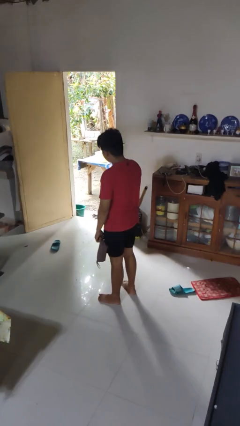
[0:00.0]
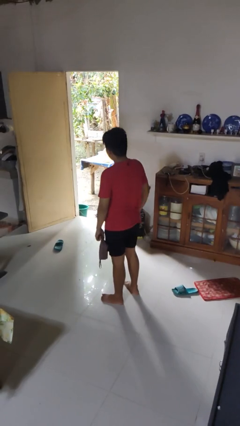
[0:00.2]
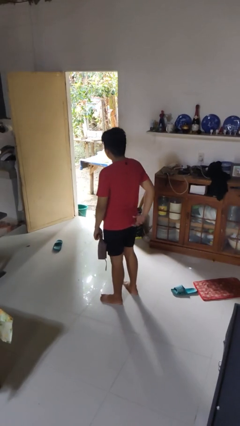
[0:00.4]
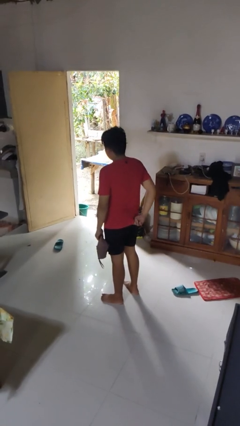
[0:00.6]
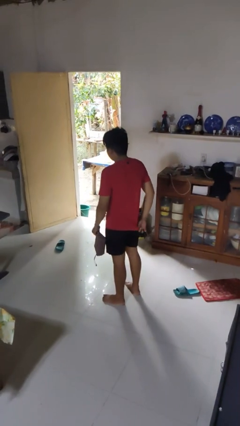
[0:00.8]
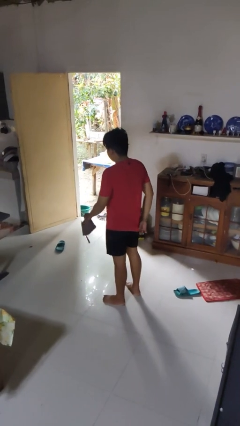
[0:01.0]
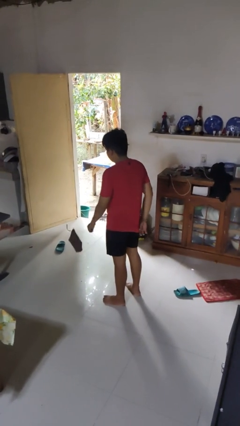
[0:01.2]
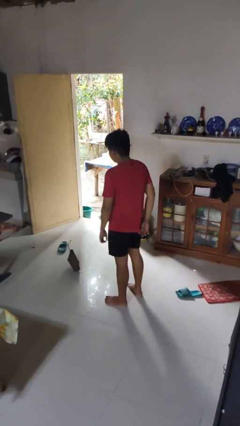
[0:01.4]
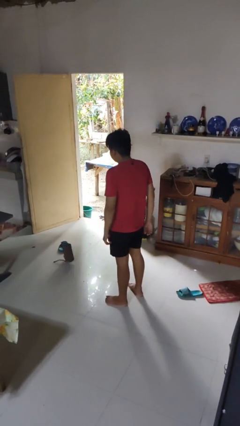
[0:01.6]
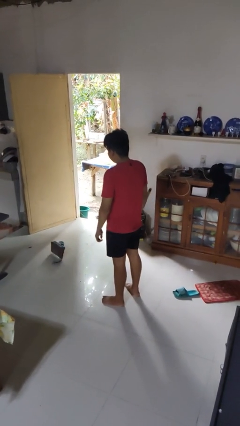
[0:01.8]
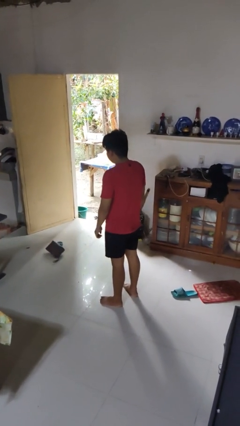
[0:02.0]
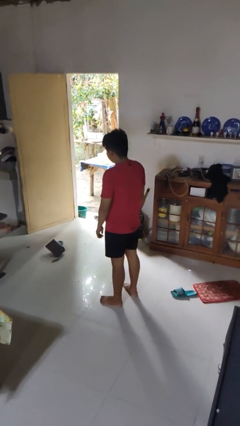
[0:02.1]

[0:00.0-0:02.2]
person throws object to ground

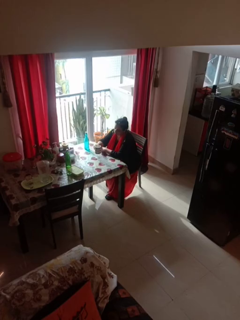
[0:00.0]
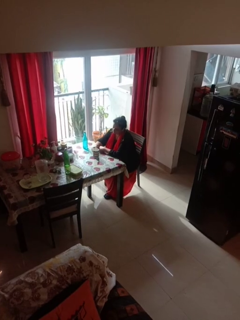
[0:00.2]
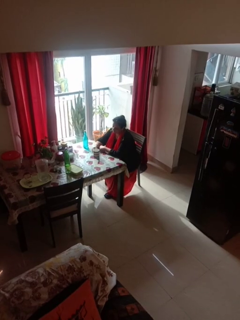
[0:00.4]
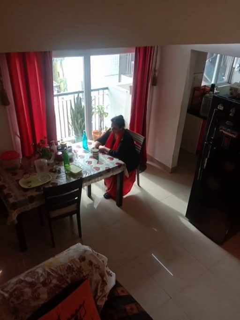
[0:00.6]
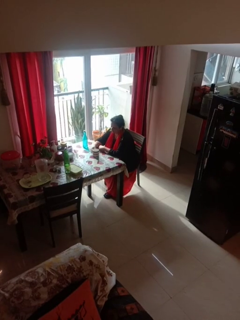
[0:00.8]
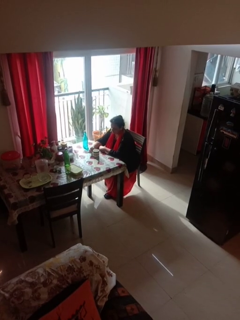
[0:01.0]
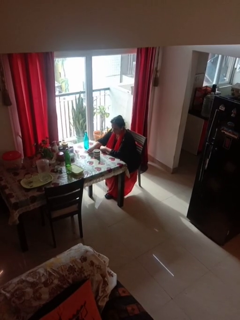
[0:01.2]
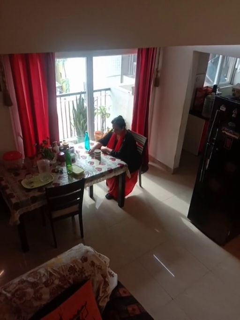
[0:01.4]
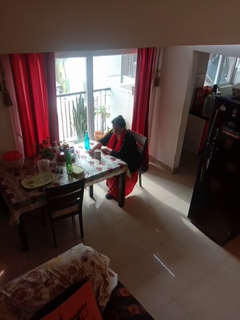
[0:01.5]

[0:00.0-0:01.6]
person puts down object on table

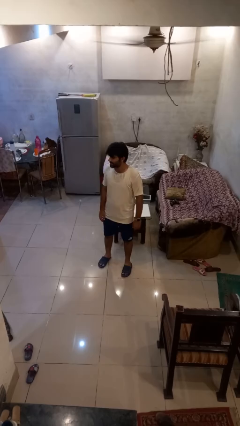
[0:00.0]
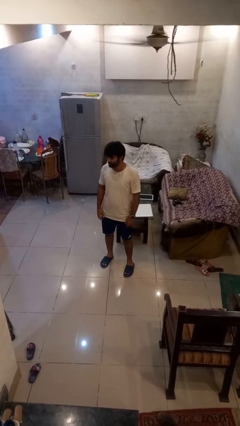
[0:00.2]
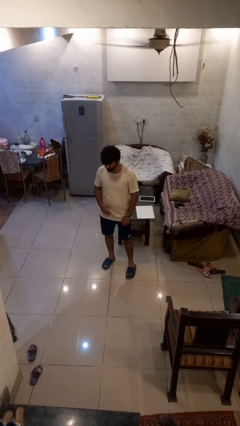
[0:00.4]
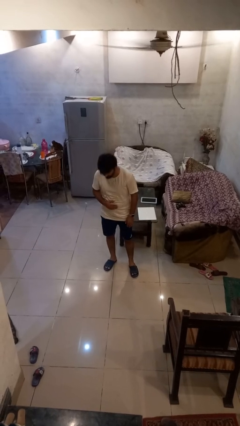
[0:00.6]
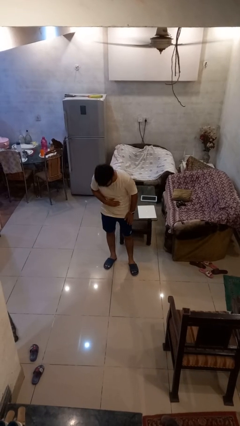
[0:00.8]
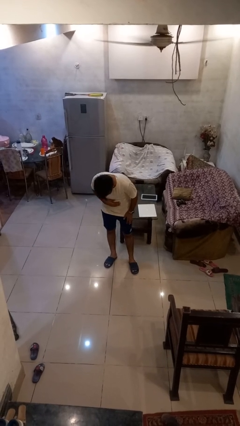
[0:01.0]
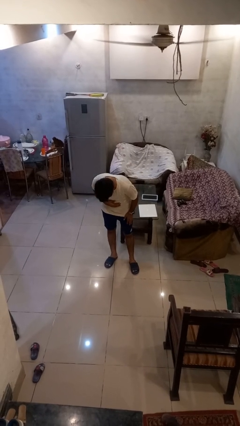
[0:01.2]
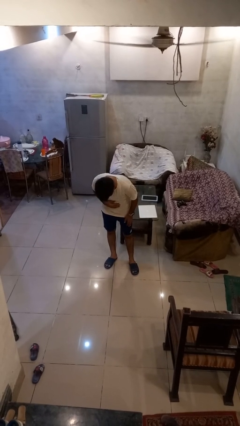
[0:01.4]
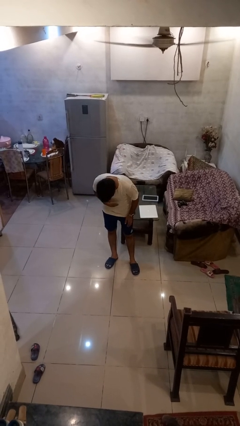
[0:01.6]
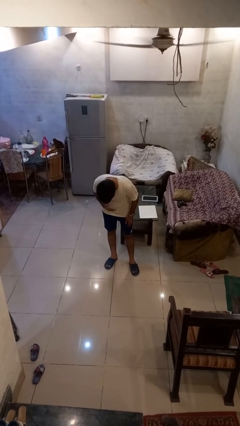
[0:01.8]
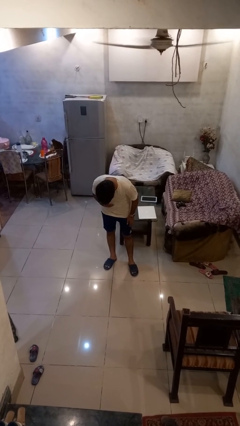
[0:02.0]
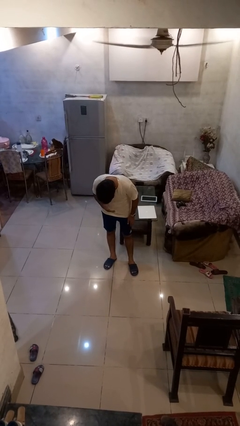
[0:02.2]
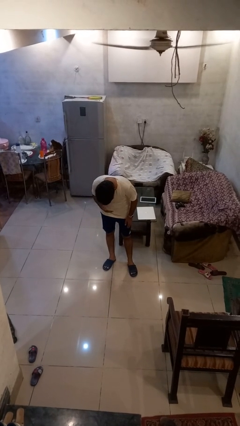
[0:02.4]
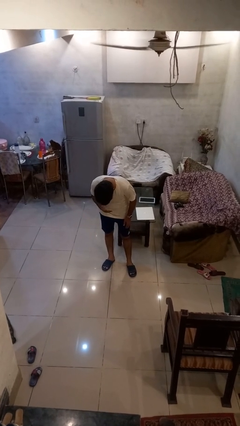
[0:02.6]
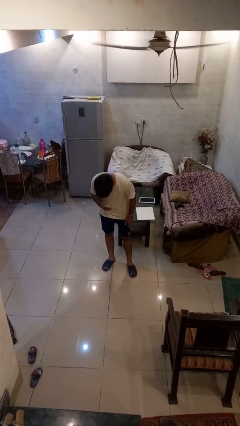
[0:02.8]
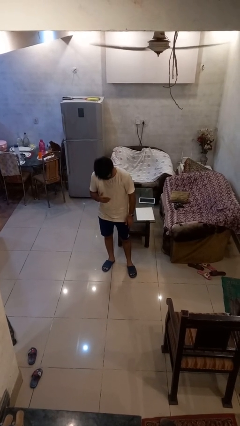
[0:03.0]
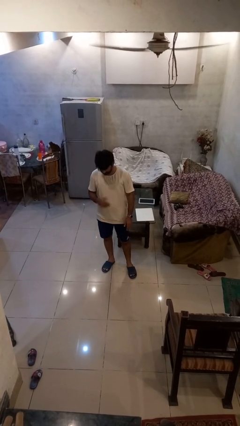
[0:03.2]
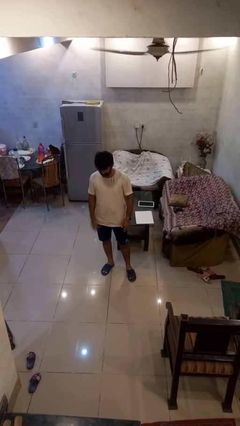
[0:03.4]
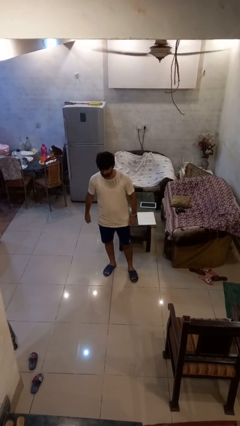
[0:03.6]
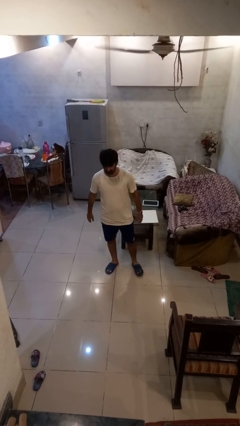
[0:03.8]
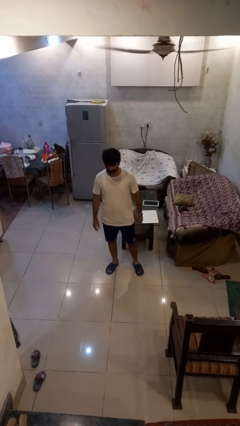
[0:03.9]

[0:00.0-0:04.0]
person bows

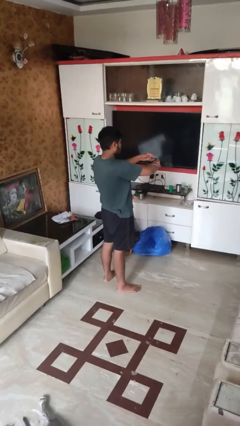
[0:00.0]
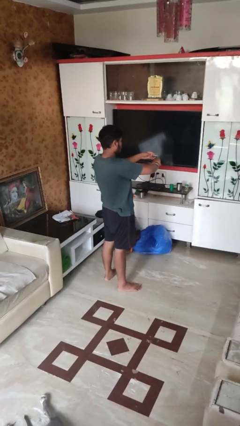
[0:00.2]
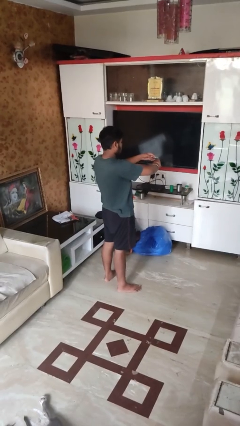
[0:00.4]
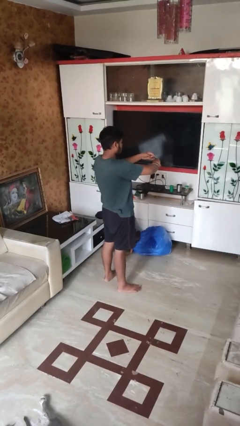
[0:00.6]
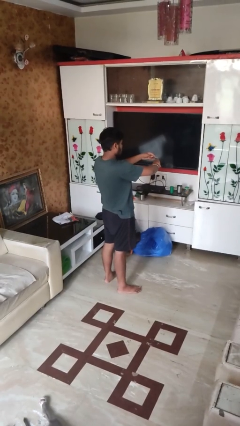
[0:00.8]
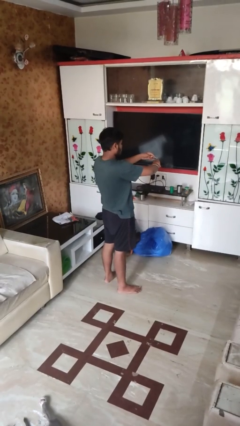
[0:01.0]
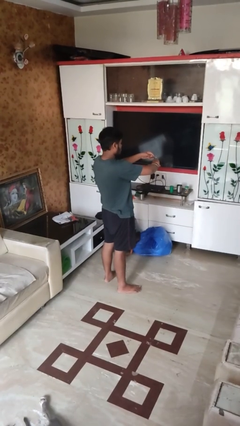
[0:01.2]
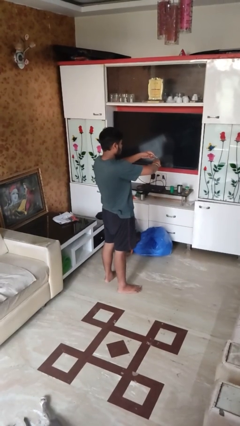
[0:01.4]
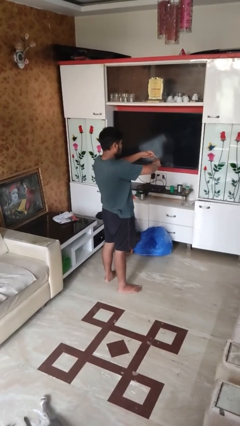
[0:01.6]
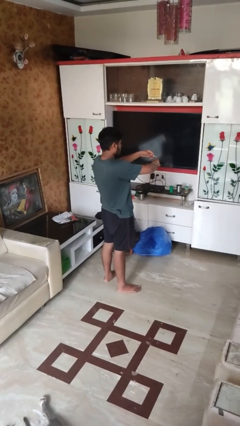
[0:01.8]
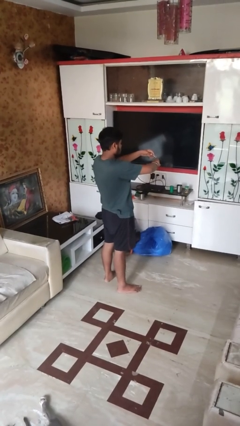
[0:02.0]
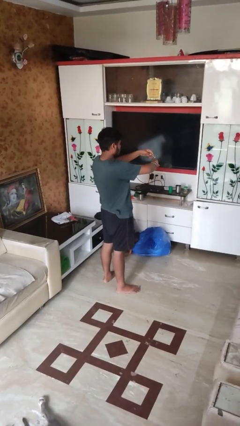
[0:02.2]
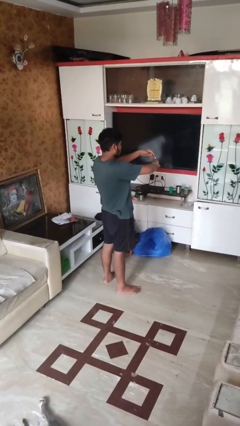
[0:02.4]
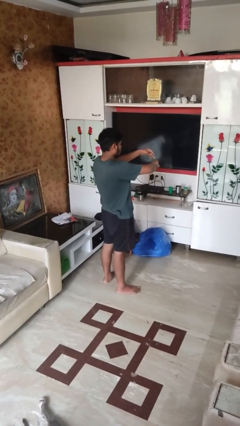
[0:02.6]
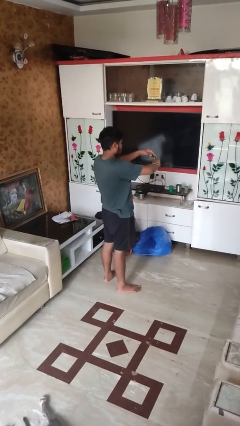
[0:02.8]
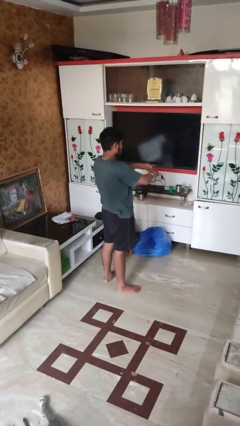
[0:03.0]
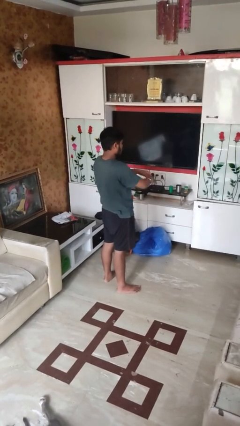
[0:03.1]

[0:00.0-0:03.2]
person clips fingernails

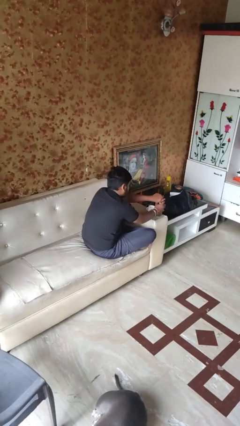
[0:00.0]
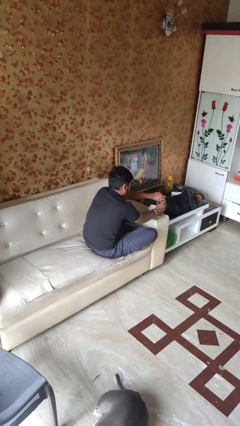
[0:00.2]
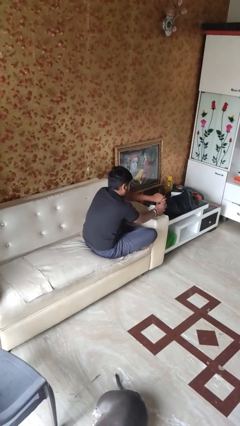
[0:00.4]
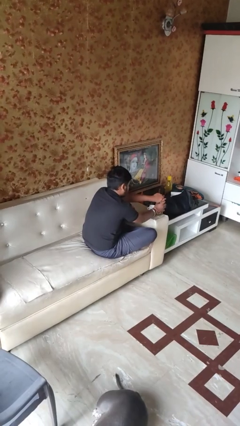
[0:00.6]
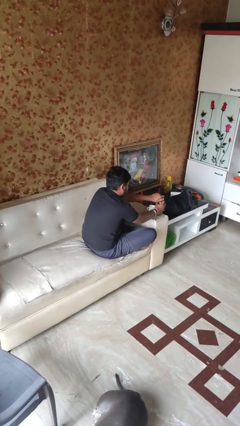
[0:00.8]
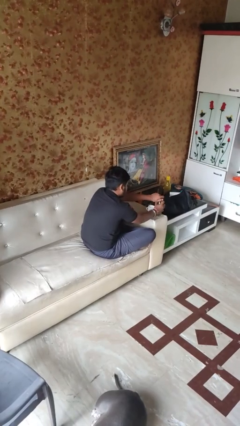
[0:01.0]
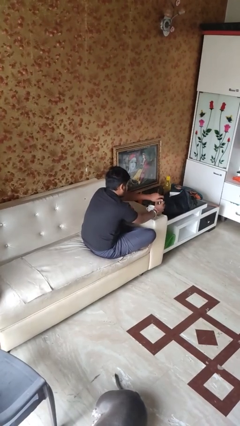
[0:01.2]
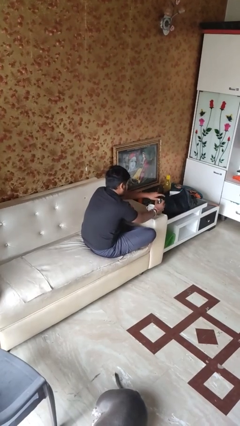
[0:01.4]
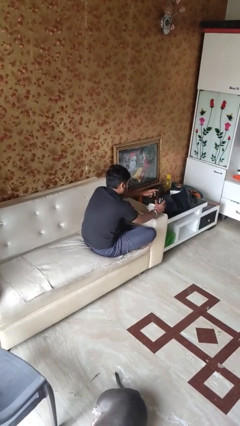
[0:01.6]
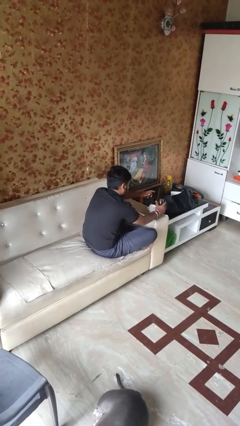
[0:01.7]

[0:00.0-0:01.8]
person screws lid to bottle

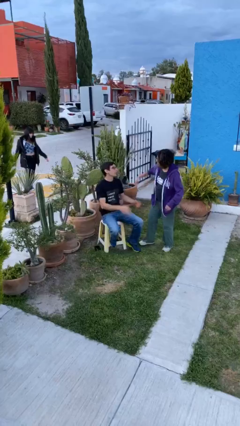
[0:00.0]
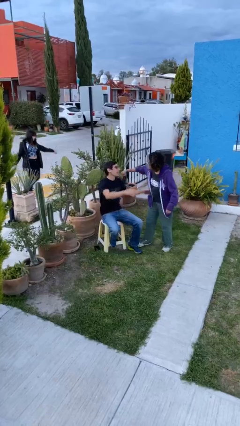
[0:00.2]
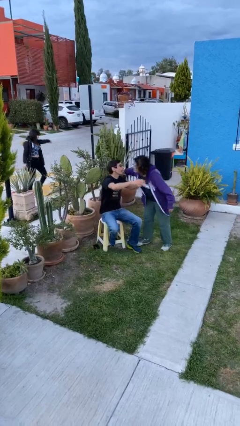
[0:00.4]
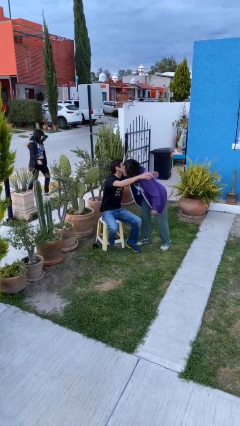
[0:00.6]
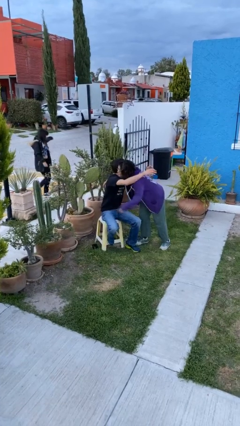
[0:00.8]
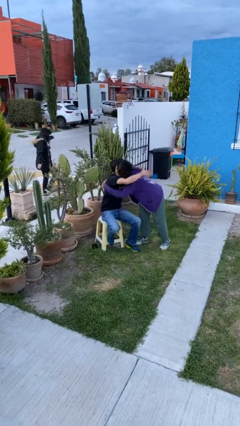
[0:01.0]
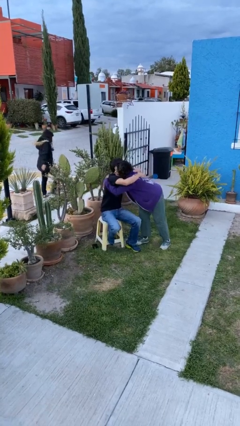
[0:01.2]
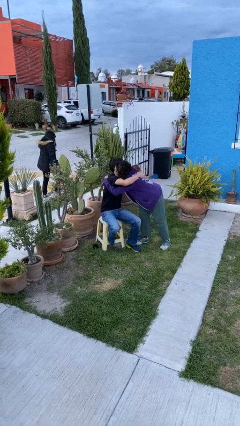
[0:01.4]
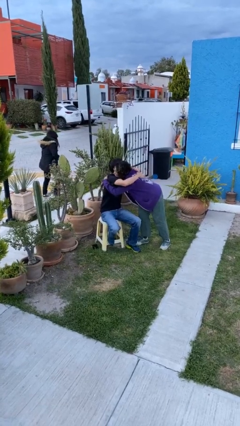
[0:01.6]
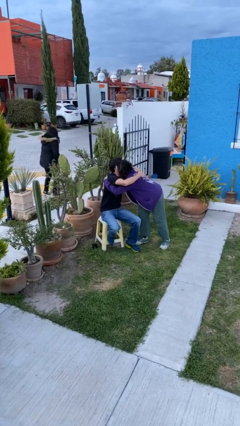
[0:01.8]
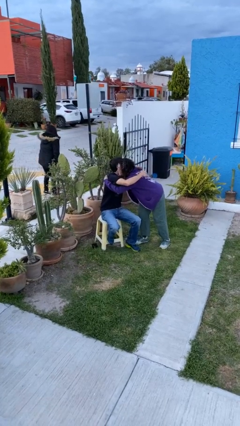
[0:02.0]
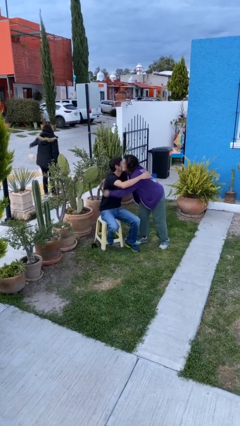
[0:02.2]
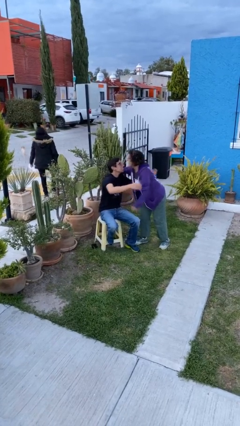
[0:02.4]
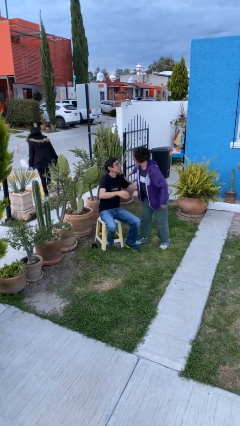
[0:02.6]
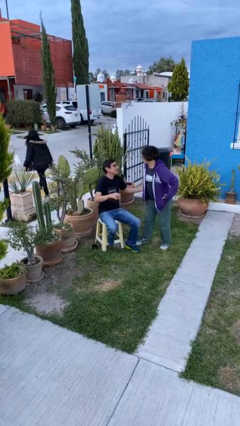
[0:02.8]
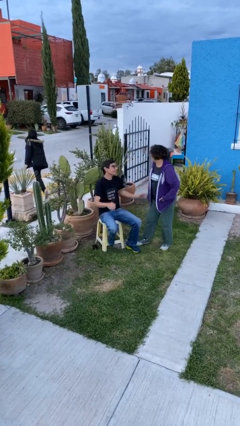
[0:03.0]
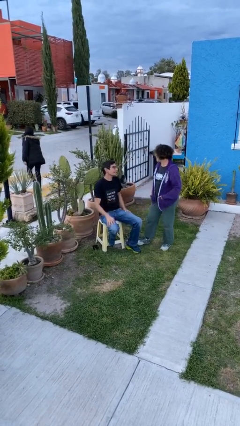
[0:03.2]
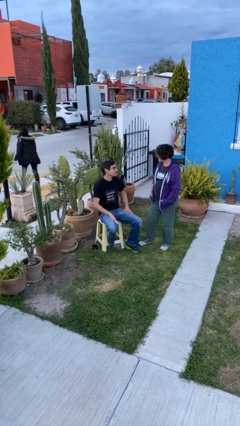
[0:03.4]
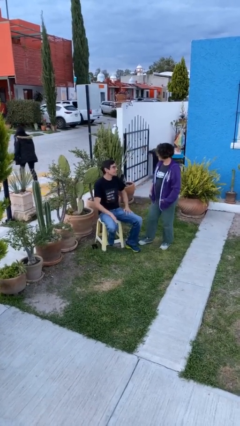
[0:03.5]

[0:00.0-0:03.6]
person embraces person

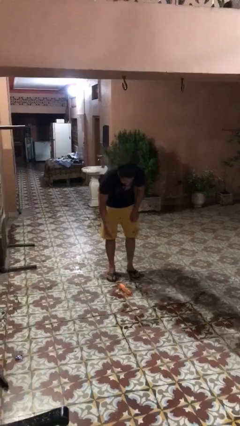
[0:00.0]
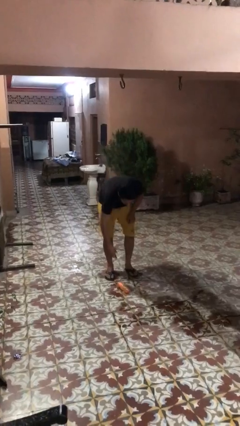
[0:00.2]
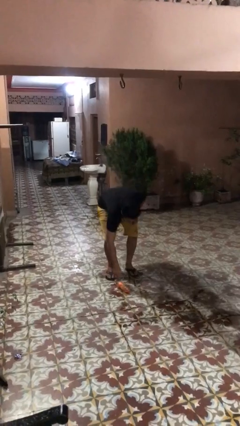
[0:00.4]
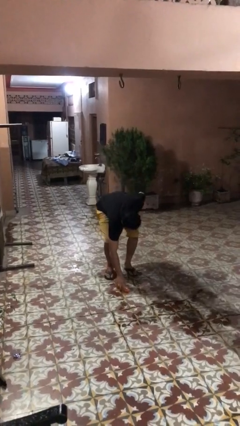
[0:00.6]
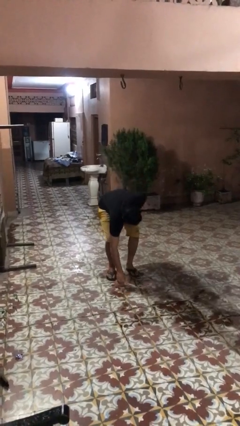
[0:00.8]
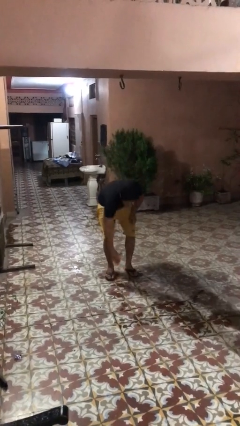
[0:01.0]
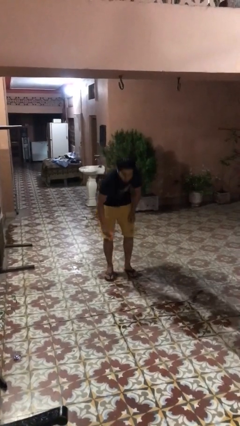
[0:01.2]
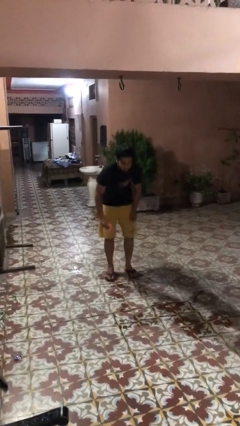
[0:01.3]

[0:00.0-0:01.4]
person picks up object from floor
